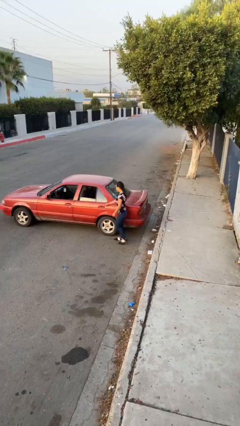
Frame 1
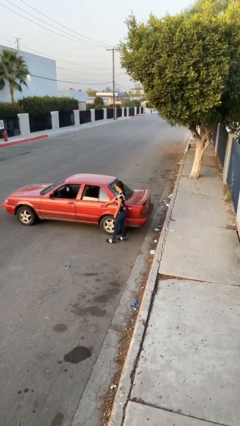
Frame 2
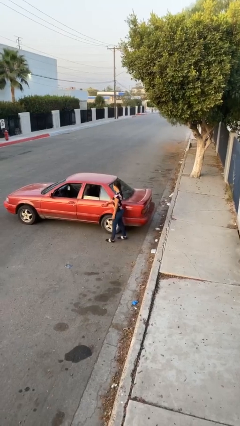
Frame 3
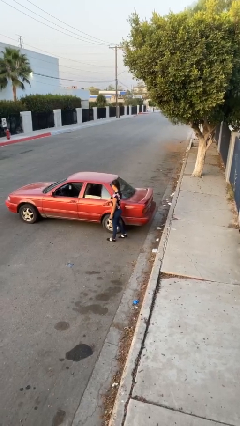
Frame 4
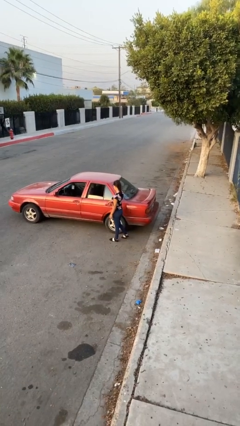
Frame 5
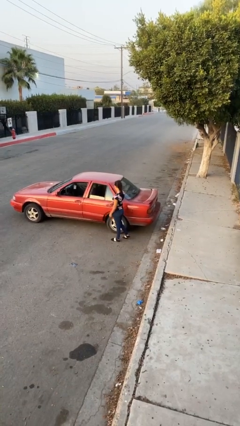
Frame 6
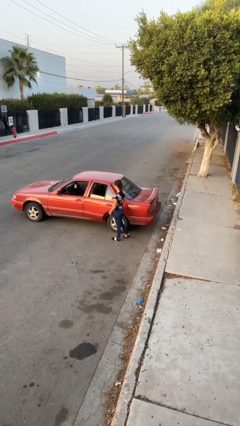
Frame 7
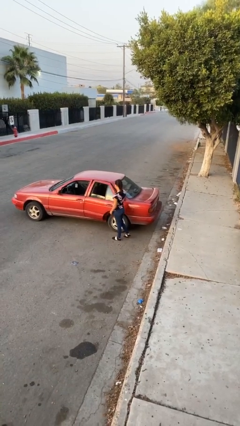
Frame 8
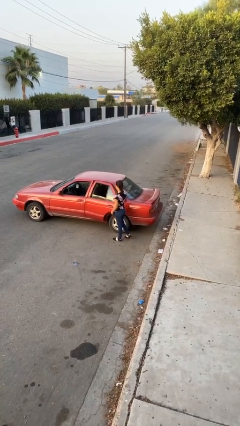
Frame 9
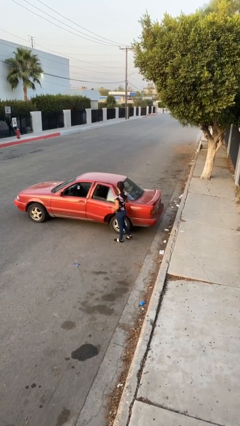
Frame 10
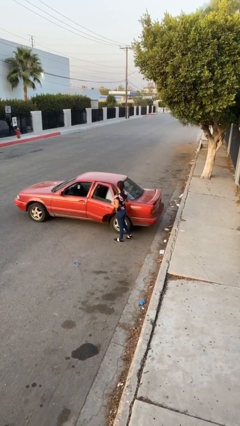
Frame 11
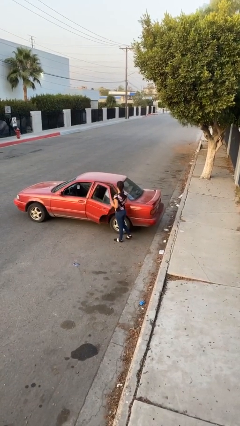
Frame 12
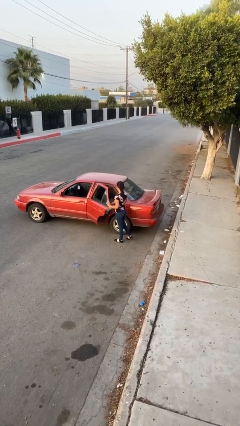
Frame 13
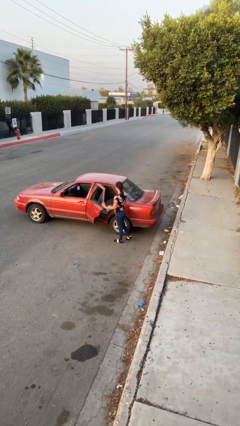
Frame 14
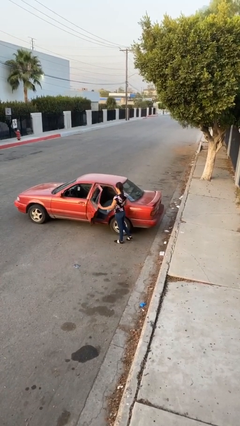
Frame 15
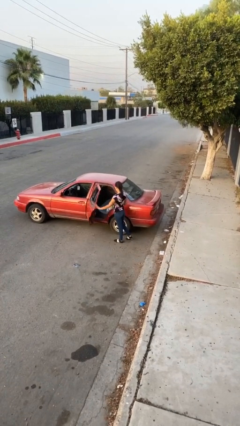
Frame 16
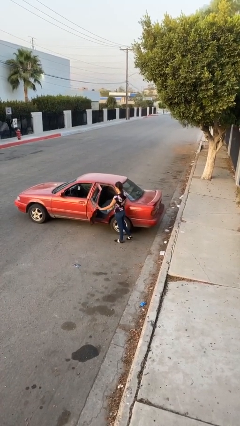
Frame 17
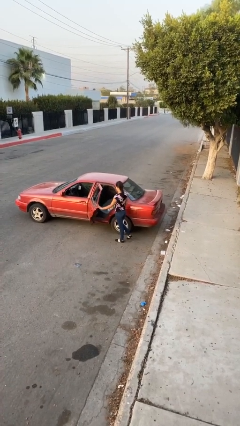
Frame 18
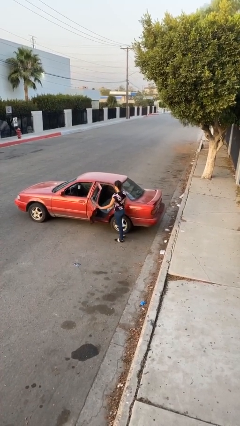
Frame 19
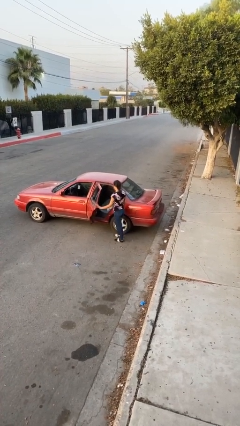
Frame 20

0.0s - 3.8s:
person opens car door

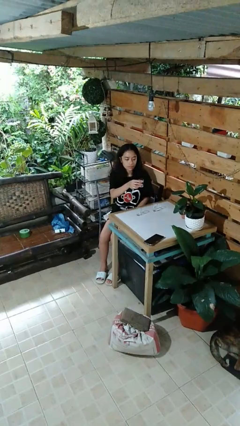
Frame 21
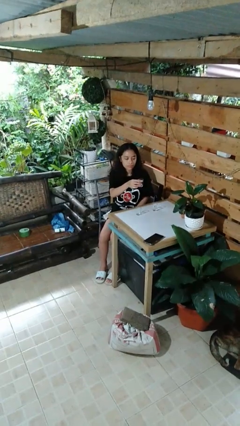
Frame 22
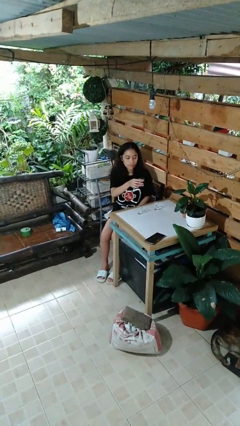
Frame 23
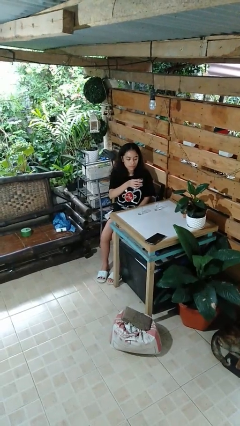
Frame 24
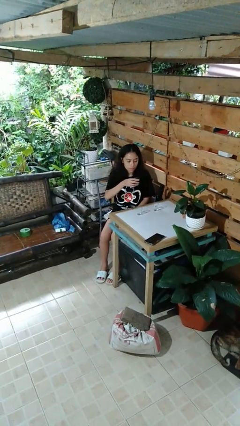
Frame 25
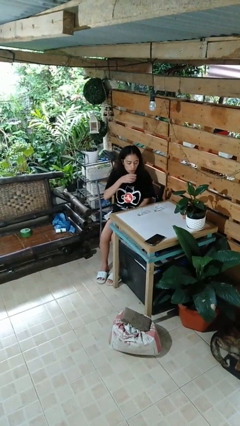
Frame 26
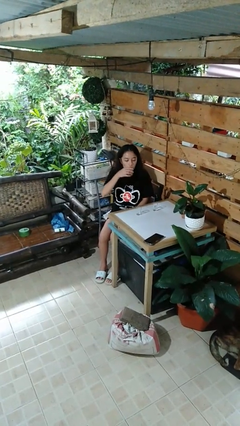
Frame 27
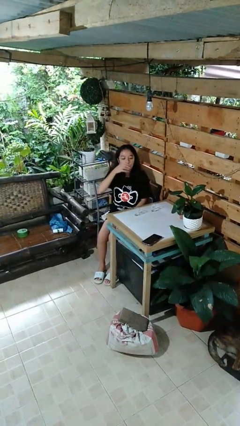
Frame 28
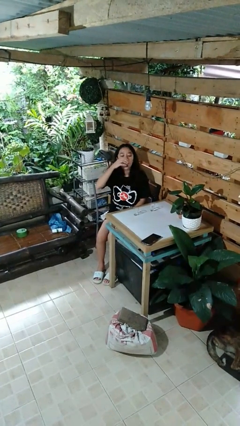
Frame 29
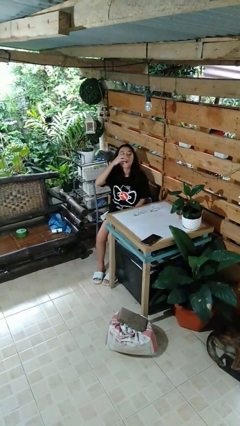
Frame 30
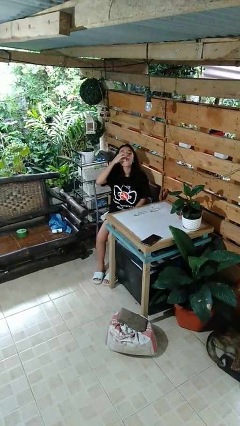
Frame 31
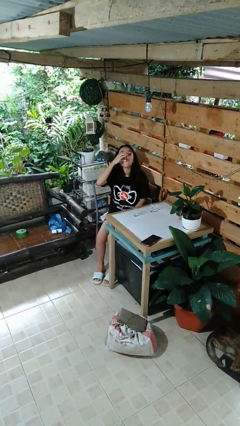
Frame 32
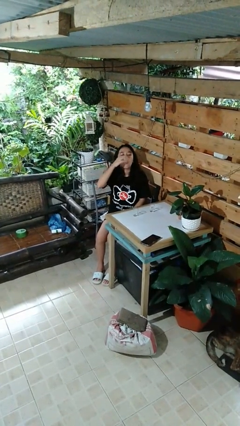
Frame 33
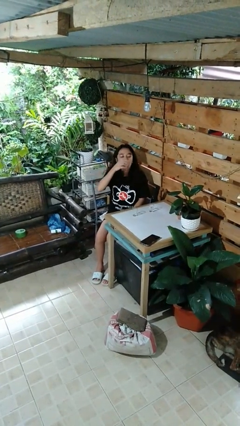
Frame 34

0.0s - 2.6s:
person drinks from shotglass

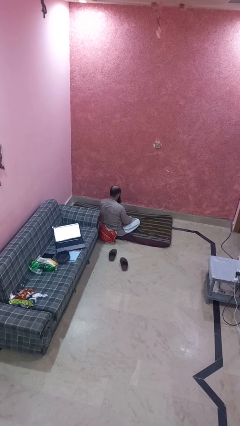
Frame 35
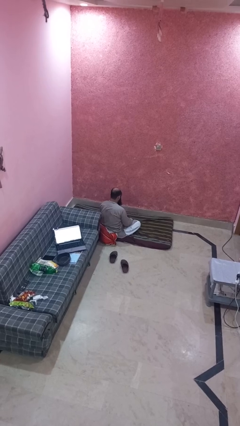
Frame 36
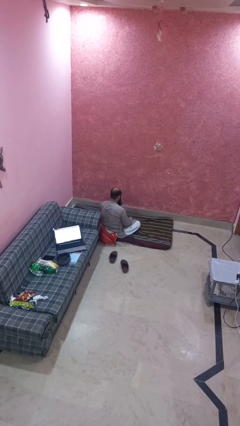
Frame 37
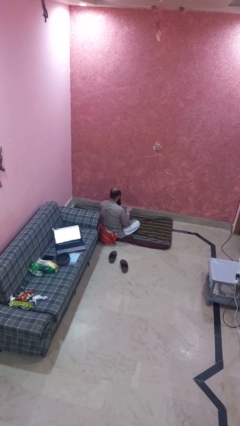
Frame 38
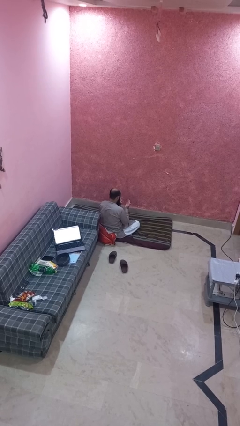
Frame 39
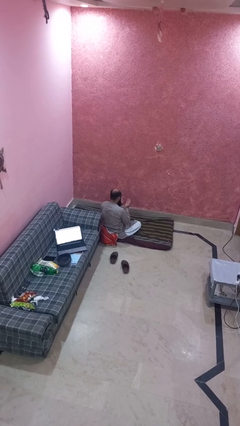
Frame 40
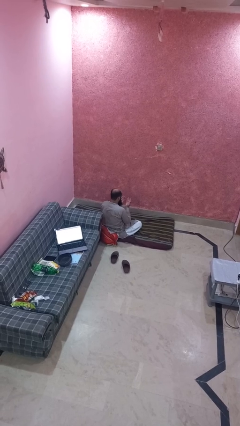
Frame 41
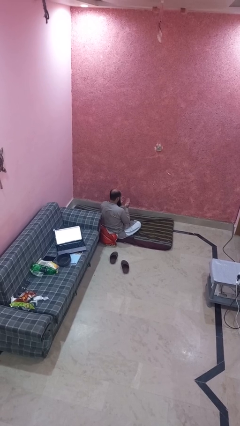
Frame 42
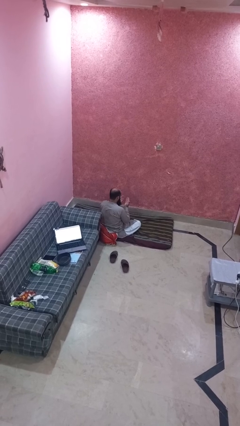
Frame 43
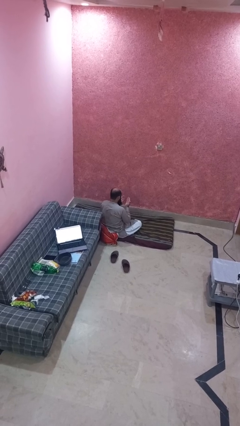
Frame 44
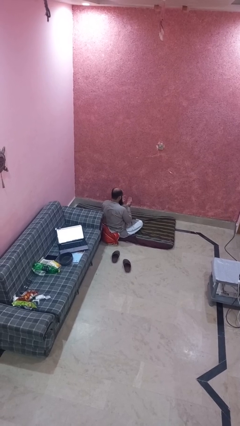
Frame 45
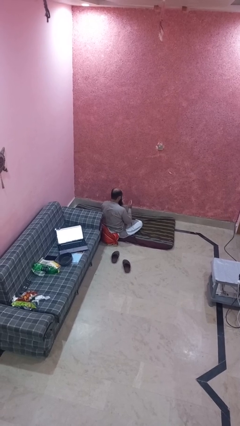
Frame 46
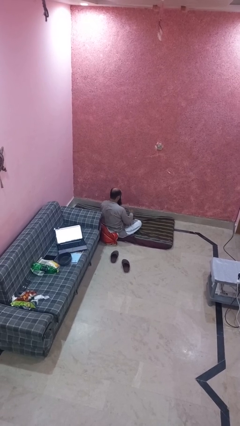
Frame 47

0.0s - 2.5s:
person looks at hands in lap

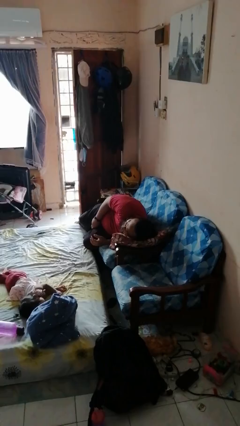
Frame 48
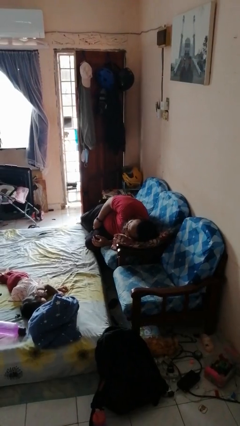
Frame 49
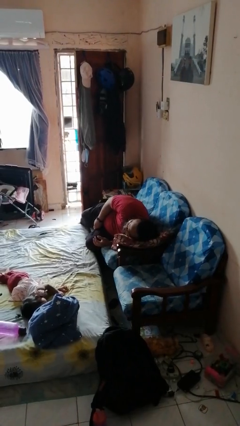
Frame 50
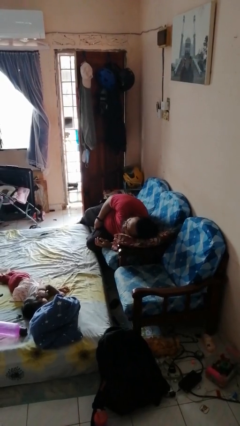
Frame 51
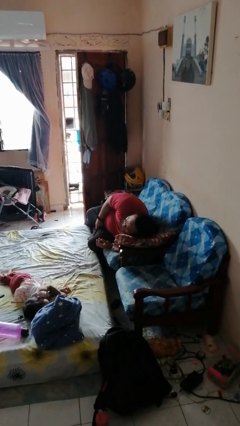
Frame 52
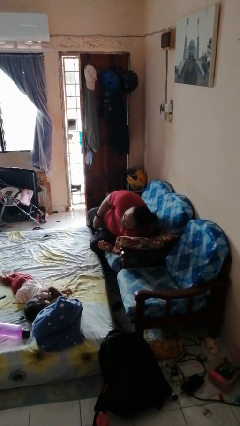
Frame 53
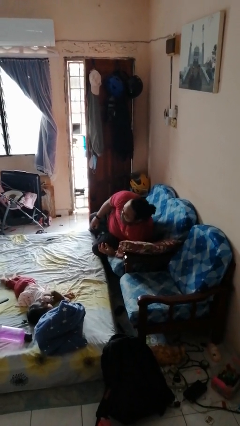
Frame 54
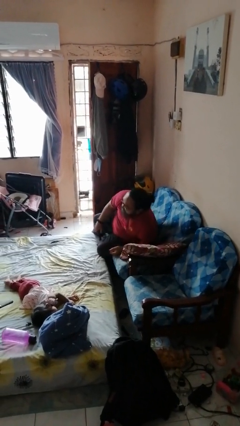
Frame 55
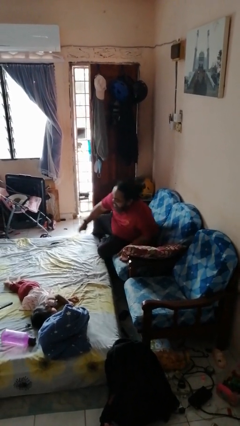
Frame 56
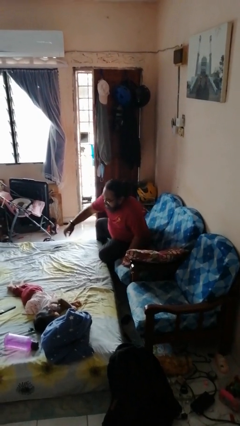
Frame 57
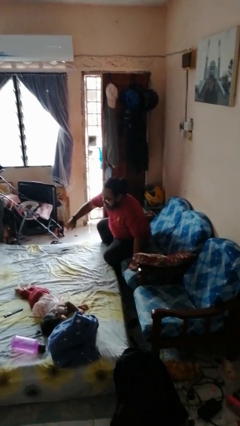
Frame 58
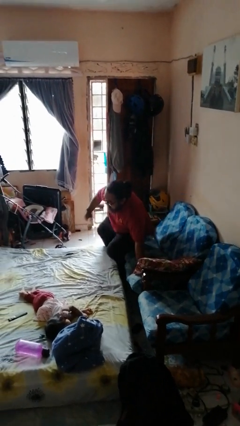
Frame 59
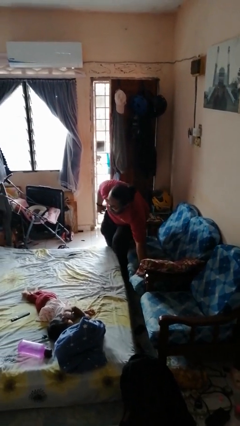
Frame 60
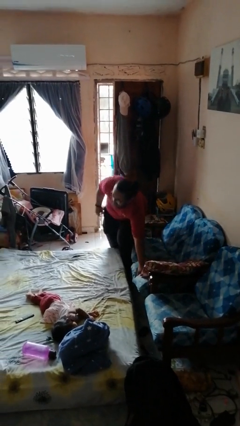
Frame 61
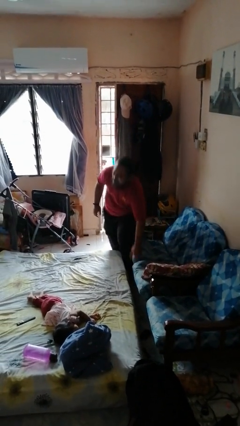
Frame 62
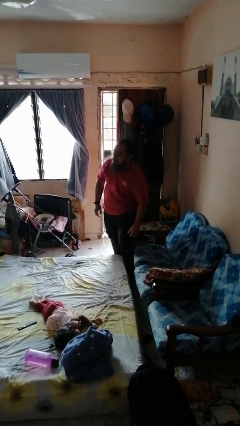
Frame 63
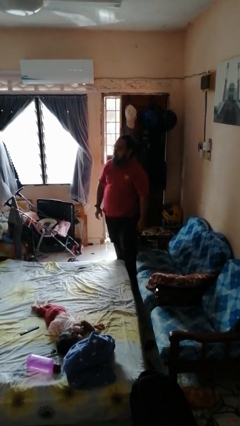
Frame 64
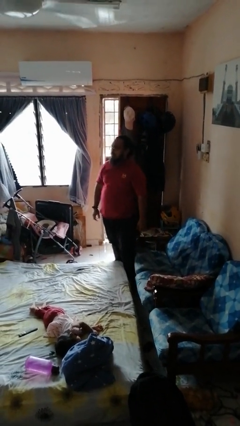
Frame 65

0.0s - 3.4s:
person stands up

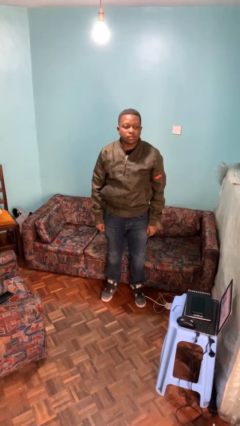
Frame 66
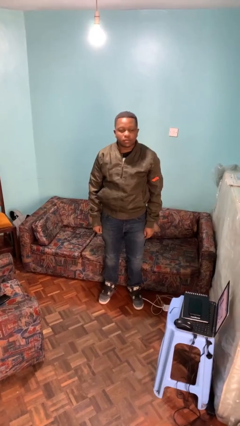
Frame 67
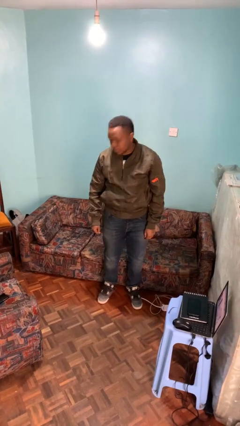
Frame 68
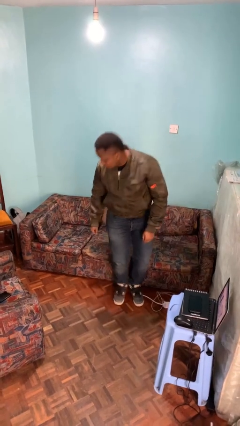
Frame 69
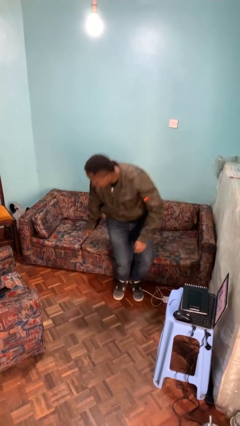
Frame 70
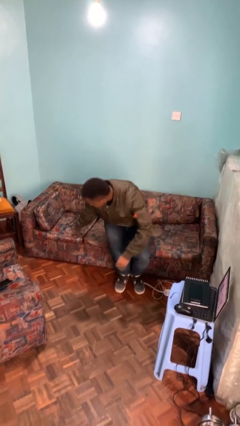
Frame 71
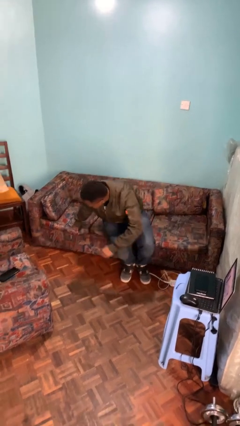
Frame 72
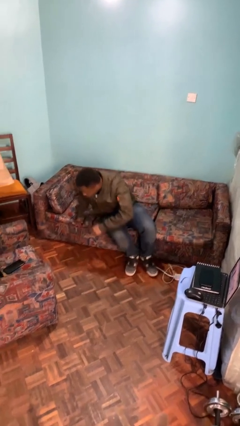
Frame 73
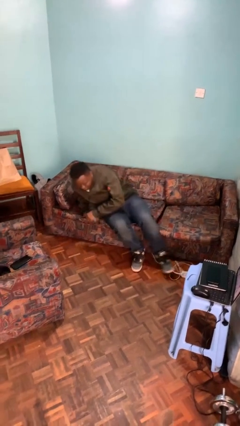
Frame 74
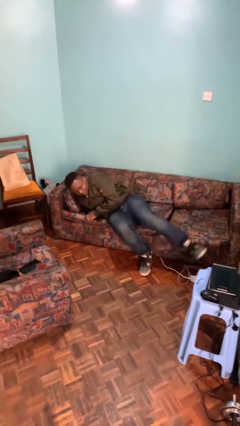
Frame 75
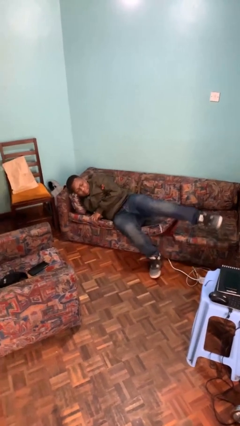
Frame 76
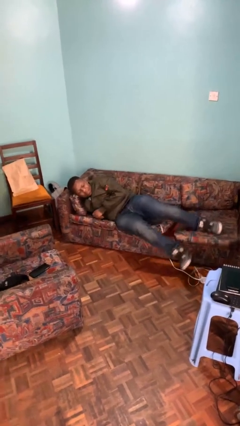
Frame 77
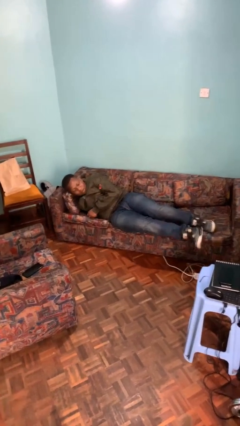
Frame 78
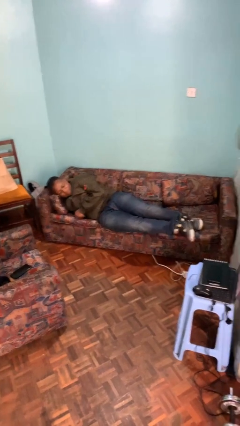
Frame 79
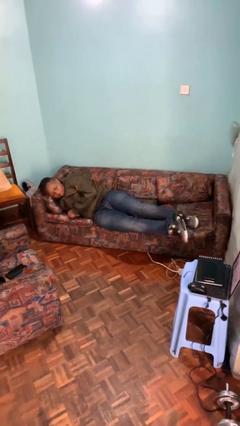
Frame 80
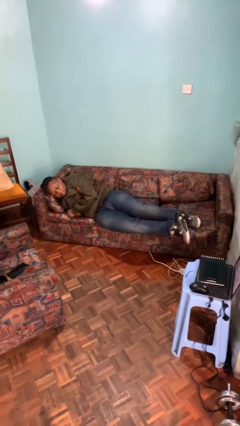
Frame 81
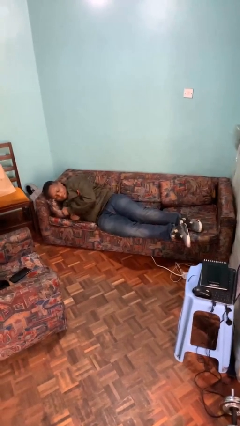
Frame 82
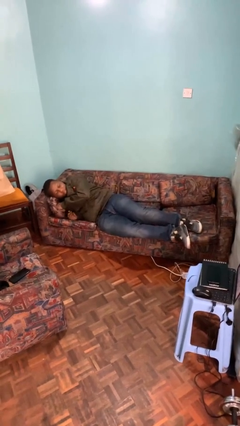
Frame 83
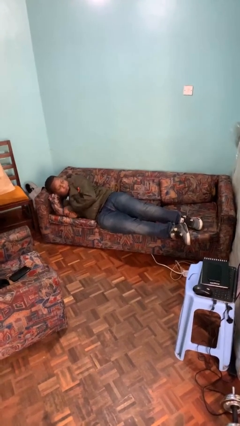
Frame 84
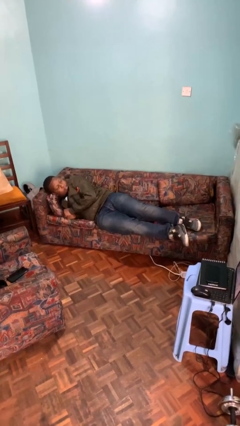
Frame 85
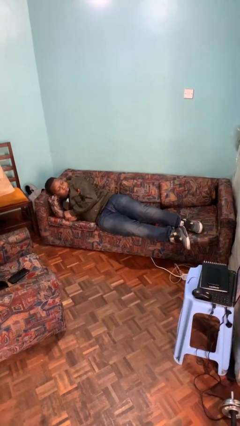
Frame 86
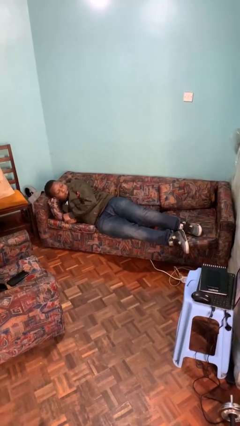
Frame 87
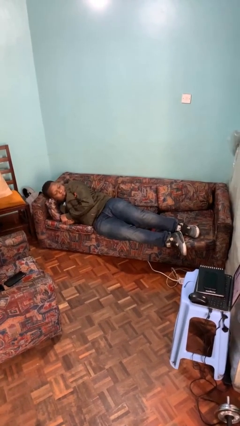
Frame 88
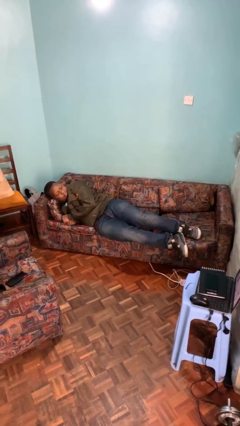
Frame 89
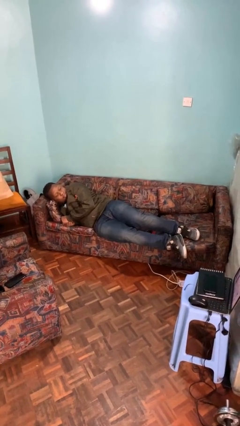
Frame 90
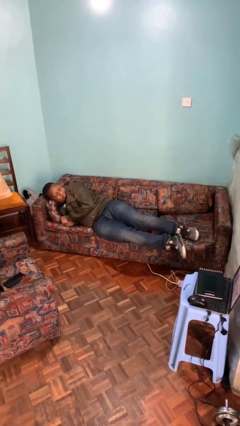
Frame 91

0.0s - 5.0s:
person lies down on couch

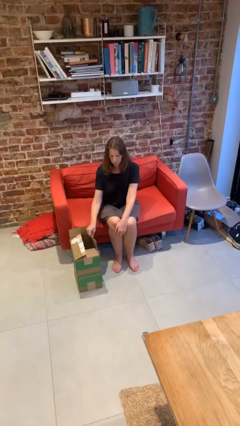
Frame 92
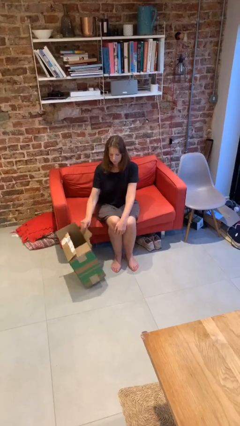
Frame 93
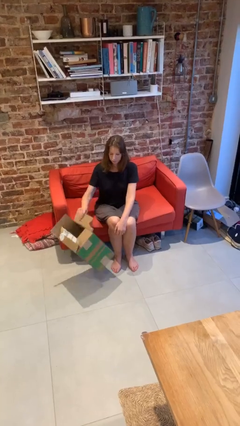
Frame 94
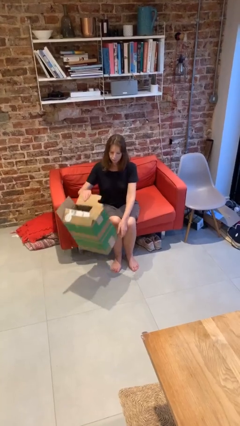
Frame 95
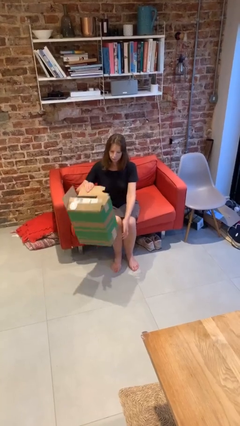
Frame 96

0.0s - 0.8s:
person picks up object from floor
